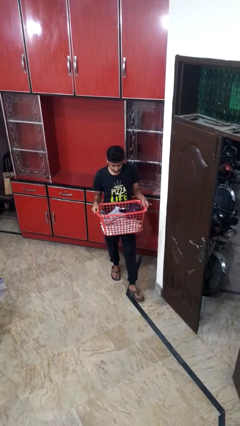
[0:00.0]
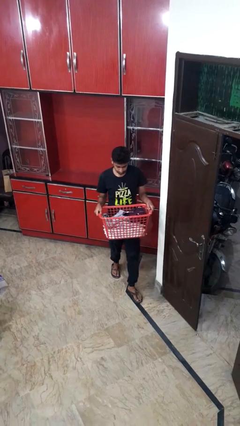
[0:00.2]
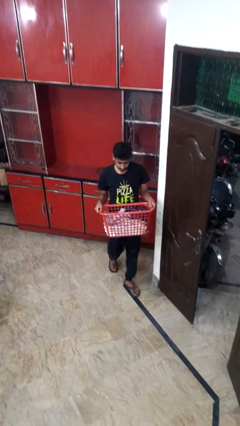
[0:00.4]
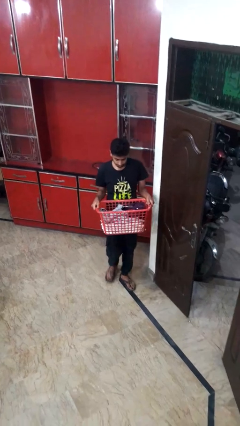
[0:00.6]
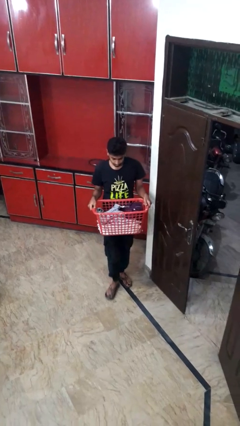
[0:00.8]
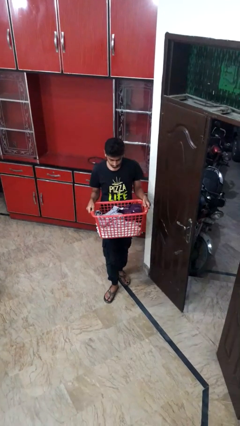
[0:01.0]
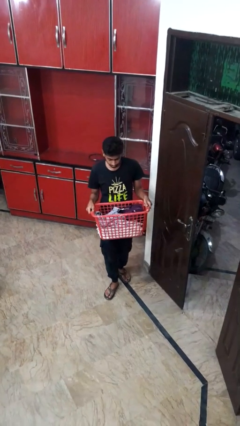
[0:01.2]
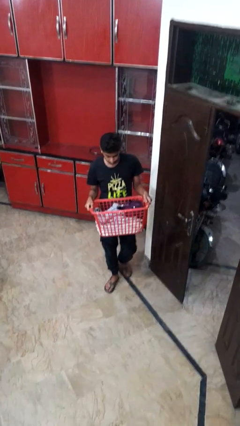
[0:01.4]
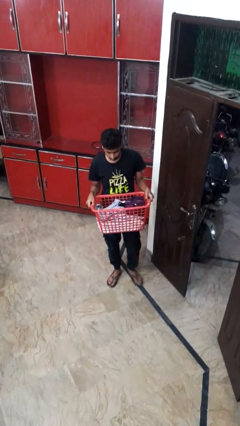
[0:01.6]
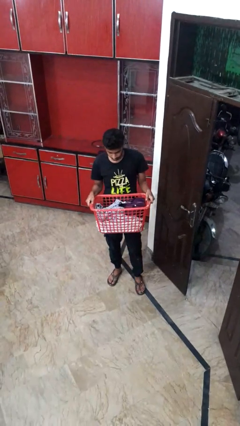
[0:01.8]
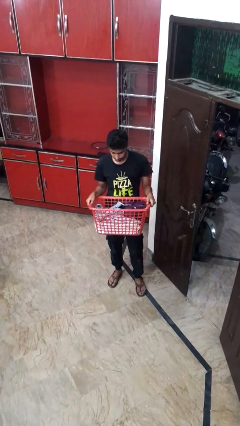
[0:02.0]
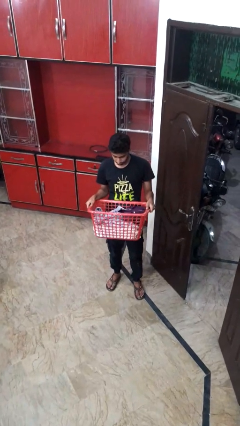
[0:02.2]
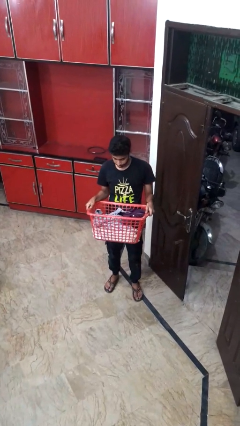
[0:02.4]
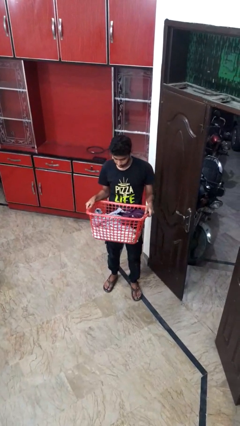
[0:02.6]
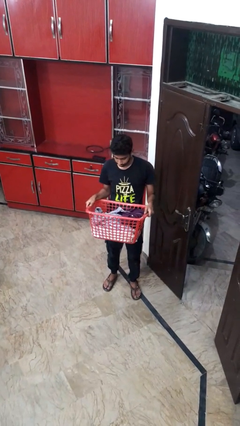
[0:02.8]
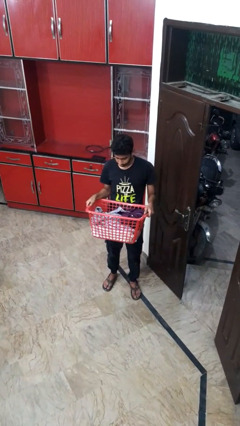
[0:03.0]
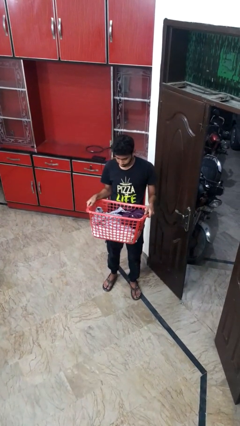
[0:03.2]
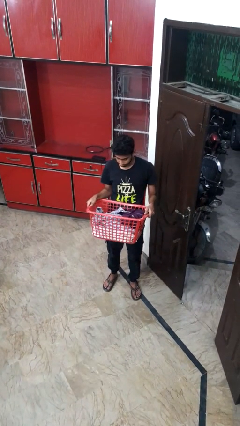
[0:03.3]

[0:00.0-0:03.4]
person carries furniture

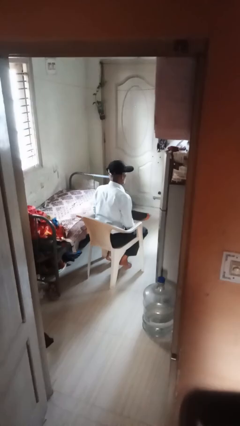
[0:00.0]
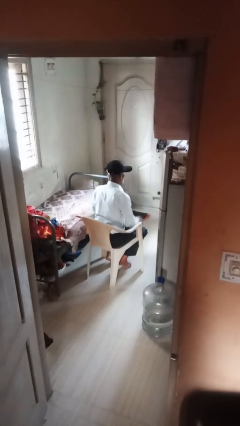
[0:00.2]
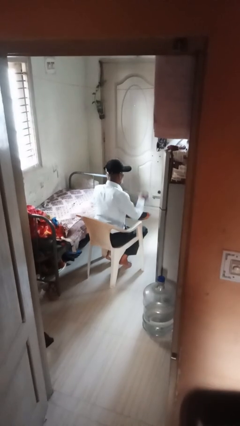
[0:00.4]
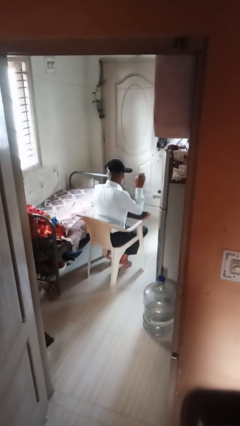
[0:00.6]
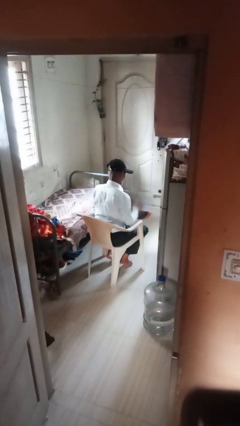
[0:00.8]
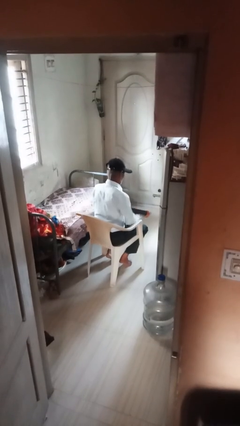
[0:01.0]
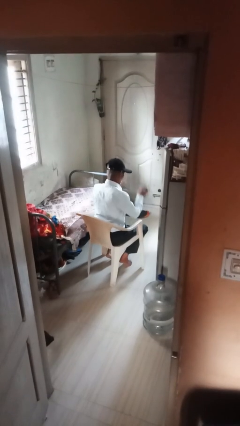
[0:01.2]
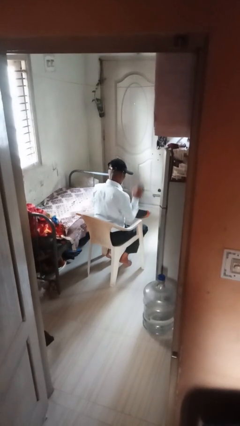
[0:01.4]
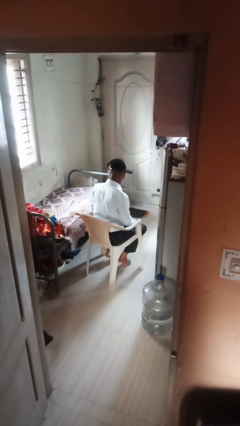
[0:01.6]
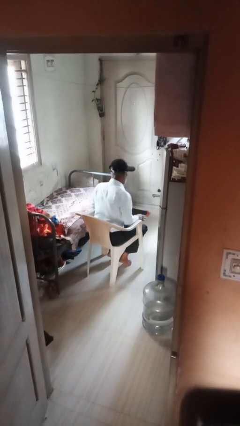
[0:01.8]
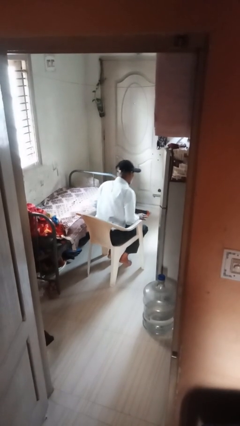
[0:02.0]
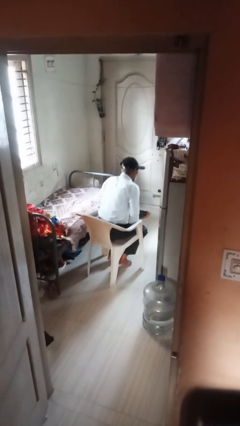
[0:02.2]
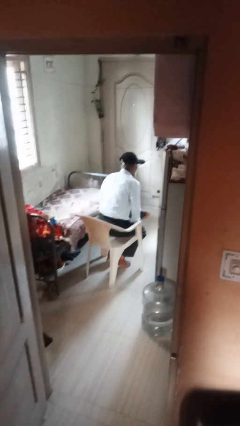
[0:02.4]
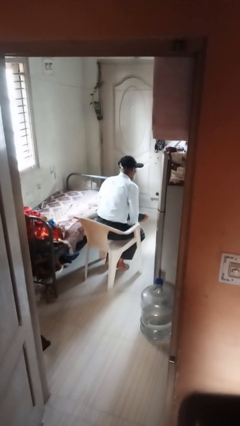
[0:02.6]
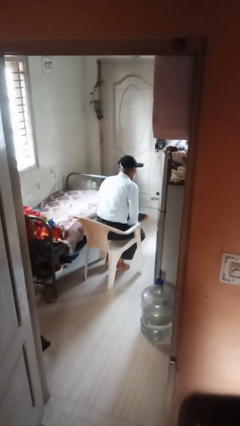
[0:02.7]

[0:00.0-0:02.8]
person slaps hands on thighs

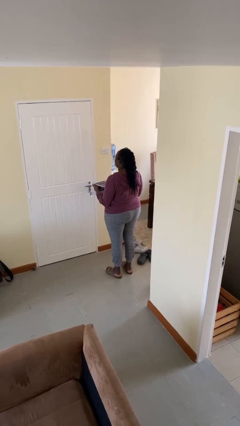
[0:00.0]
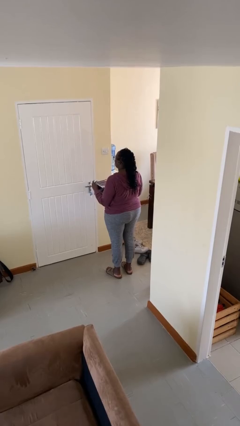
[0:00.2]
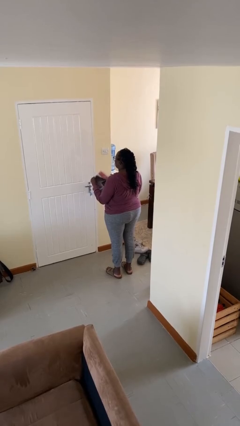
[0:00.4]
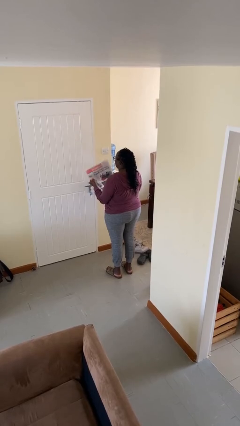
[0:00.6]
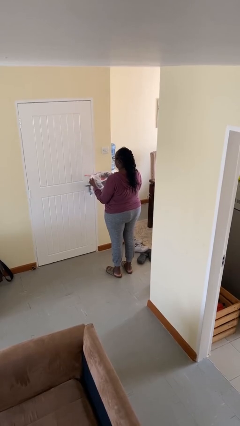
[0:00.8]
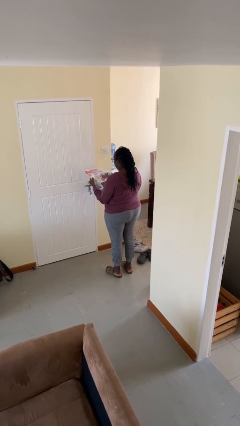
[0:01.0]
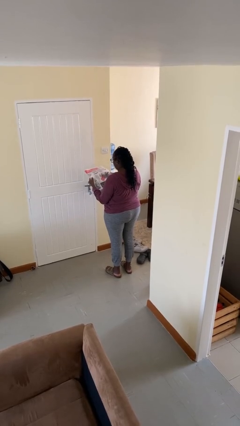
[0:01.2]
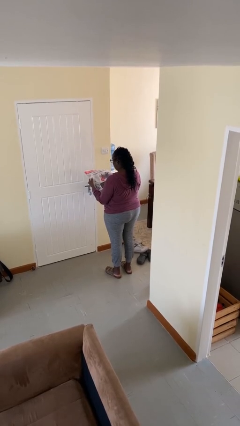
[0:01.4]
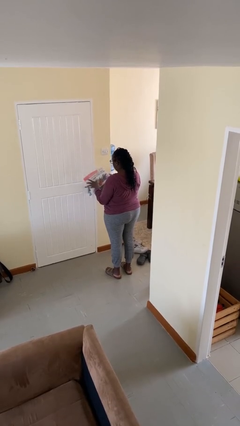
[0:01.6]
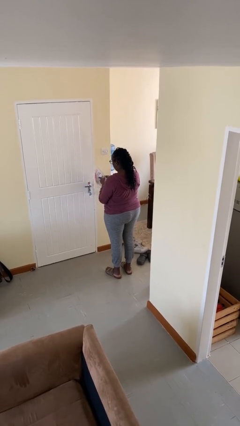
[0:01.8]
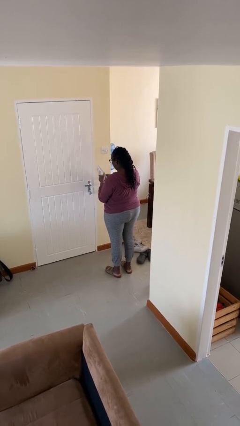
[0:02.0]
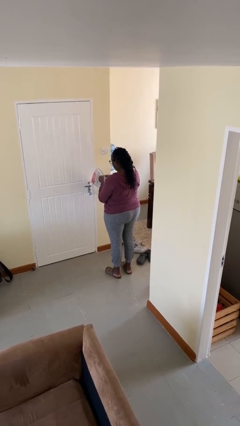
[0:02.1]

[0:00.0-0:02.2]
person reads newspaper

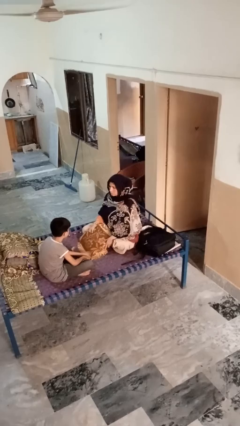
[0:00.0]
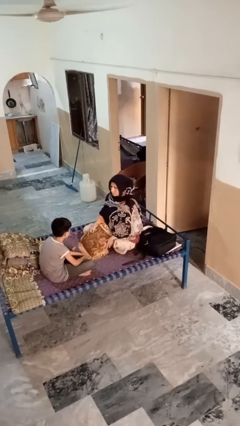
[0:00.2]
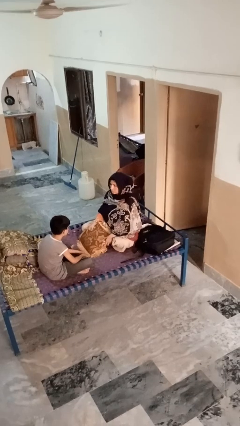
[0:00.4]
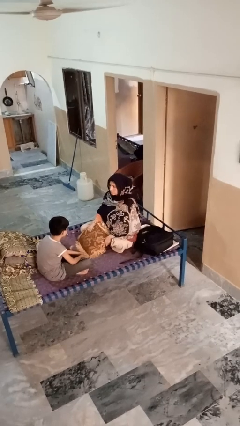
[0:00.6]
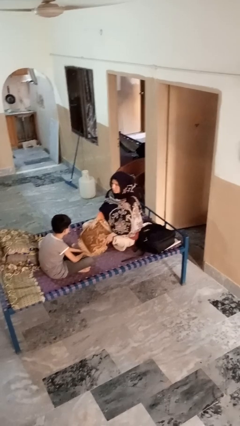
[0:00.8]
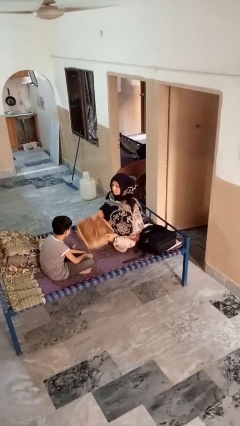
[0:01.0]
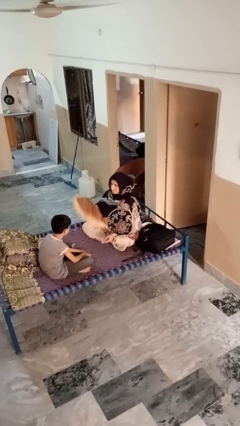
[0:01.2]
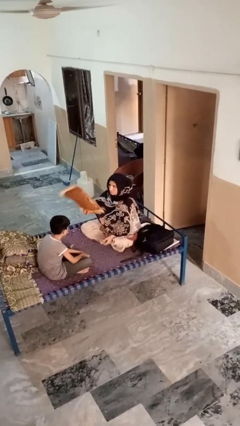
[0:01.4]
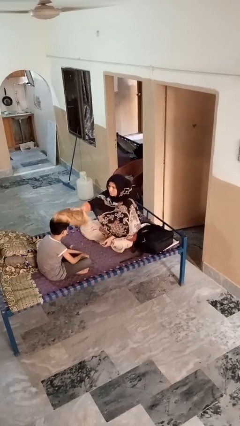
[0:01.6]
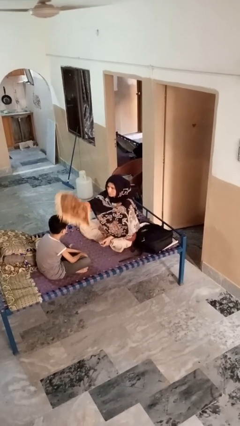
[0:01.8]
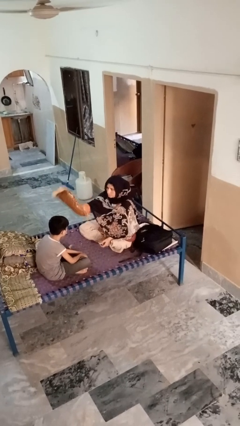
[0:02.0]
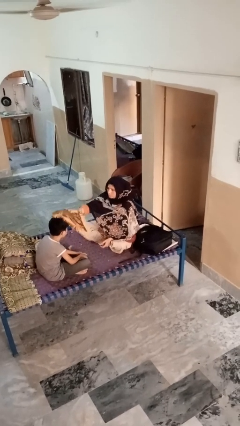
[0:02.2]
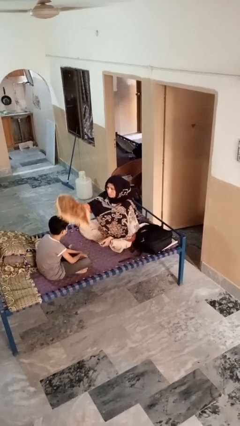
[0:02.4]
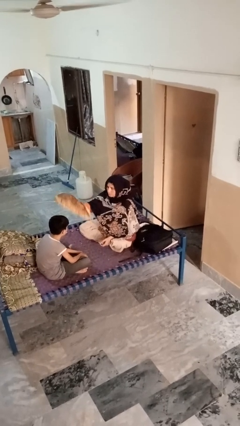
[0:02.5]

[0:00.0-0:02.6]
person hits person with pillow

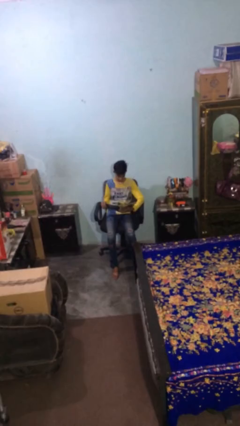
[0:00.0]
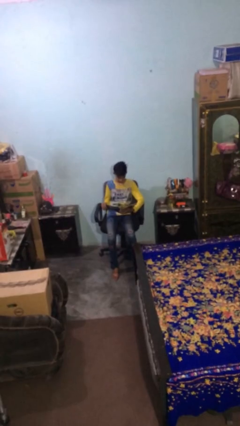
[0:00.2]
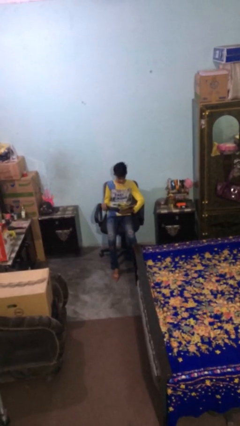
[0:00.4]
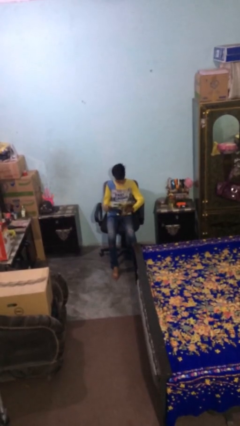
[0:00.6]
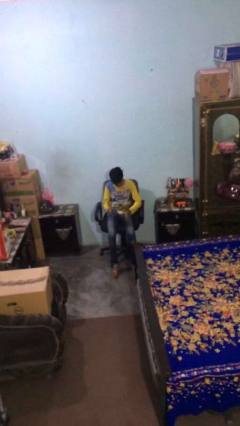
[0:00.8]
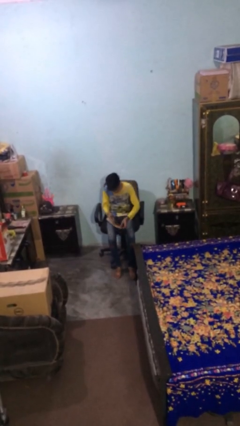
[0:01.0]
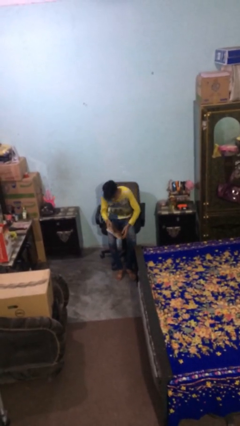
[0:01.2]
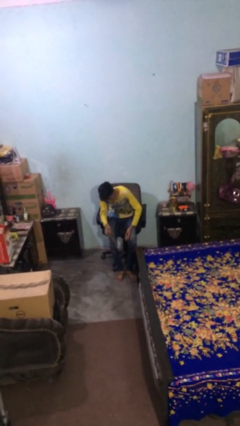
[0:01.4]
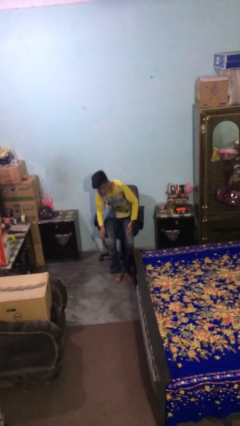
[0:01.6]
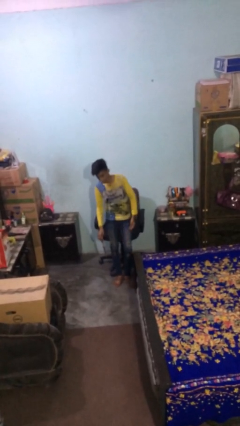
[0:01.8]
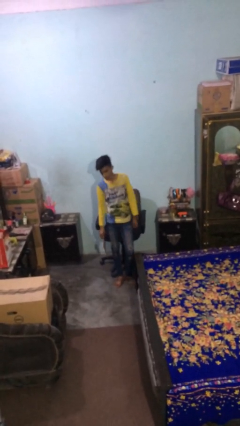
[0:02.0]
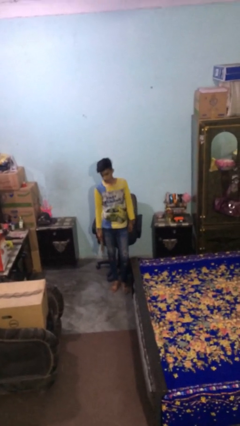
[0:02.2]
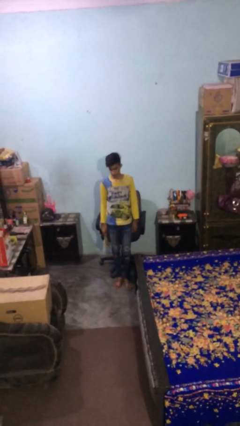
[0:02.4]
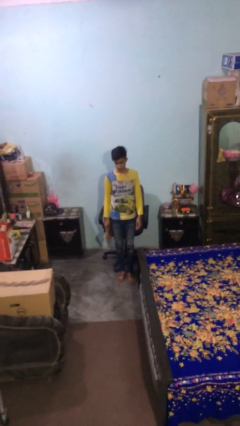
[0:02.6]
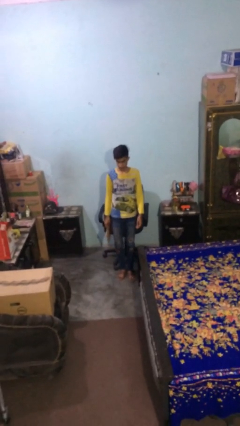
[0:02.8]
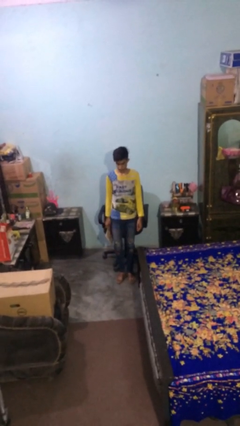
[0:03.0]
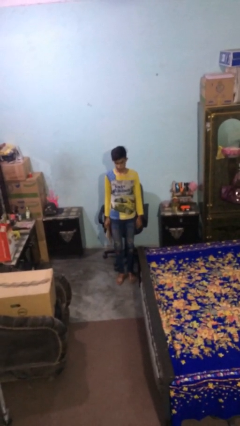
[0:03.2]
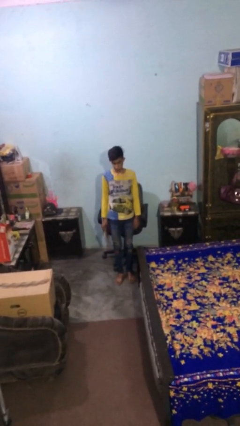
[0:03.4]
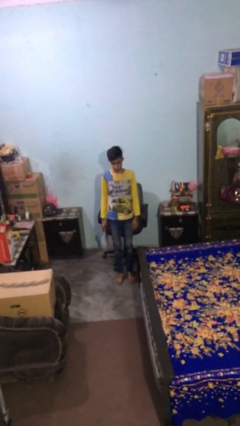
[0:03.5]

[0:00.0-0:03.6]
person stands up

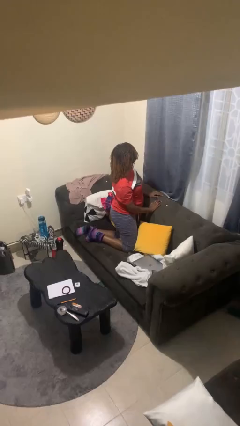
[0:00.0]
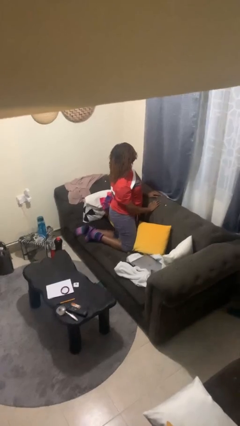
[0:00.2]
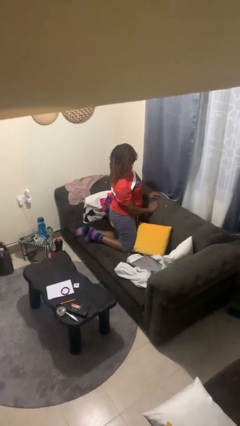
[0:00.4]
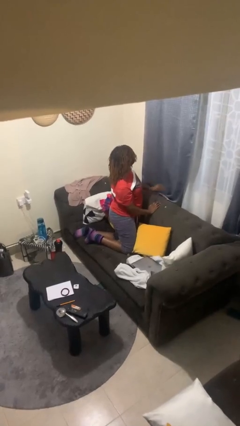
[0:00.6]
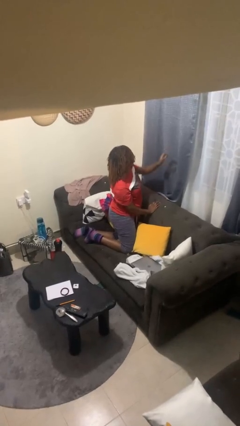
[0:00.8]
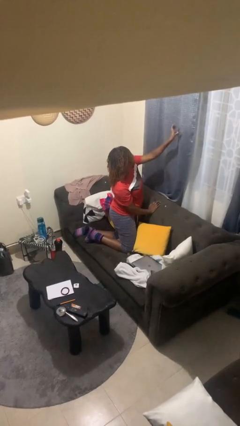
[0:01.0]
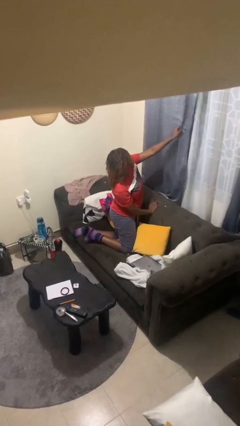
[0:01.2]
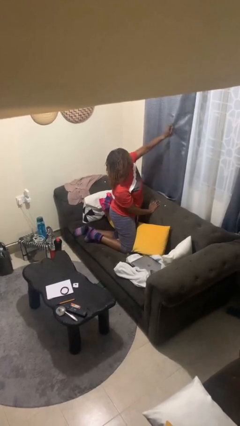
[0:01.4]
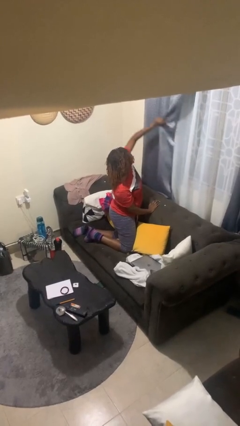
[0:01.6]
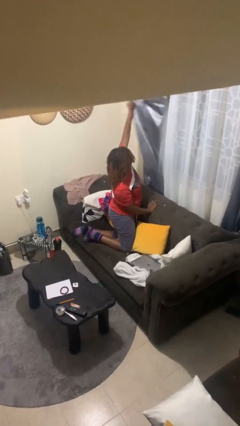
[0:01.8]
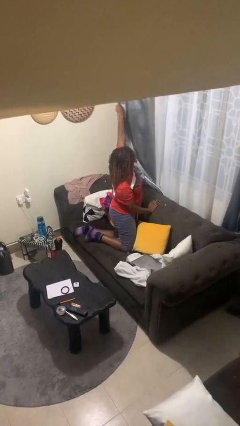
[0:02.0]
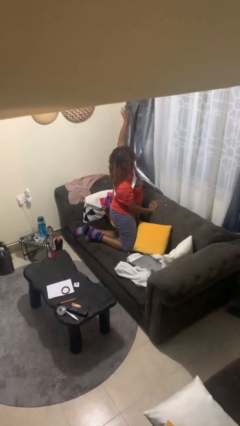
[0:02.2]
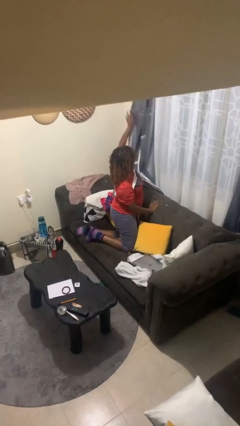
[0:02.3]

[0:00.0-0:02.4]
person opens curtains

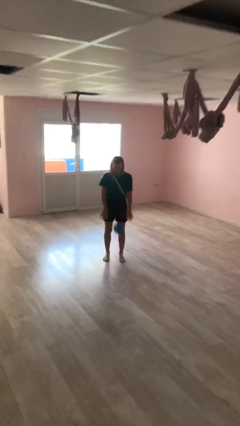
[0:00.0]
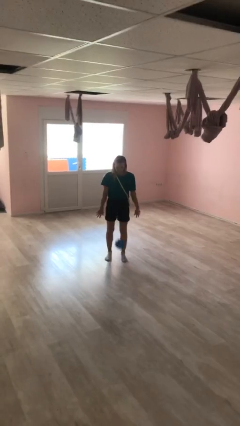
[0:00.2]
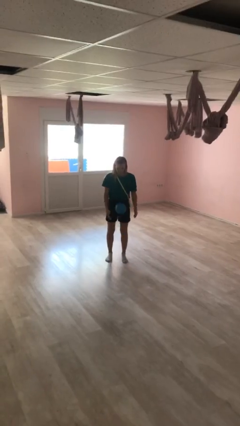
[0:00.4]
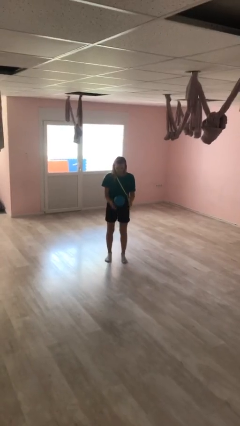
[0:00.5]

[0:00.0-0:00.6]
person bounces ball on floor
